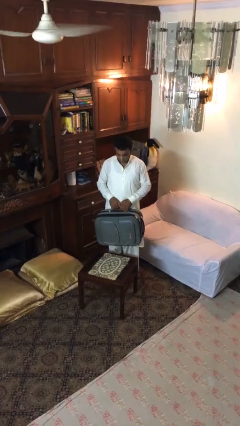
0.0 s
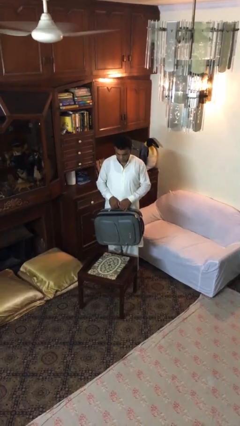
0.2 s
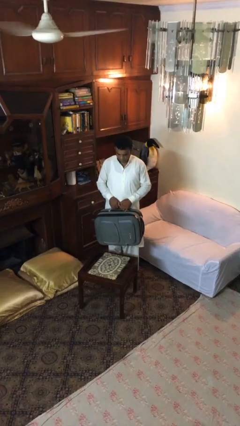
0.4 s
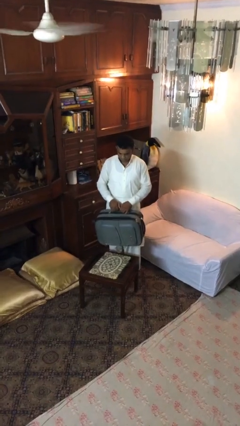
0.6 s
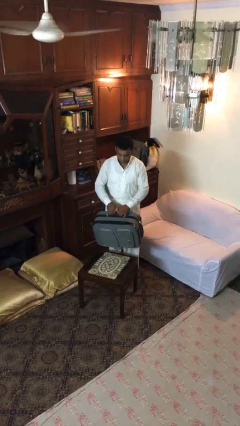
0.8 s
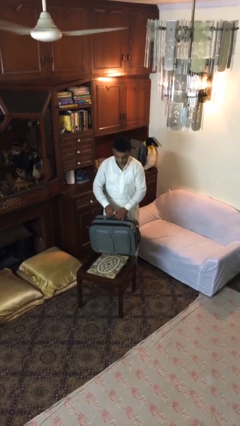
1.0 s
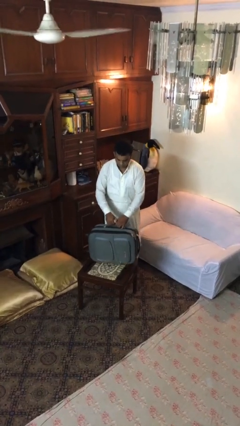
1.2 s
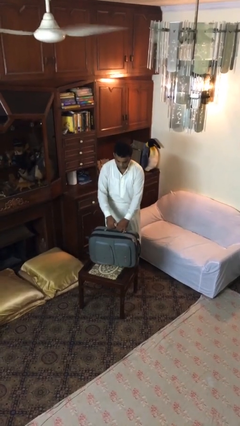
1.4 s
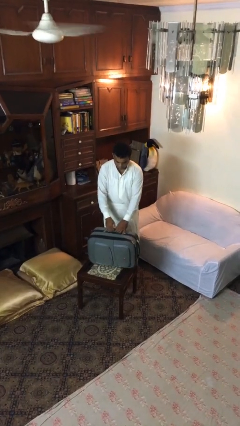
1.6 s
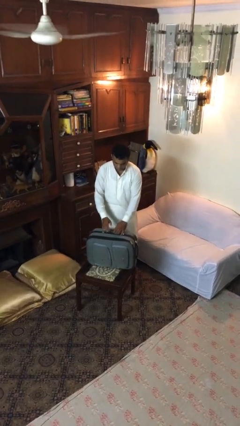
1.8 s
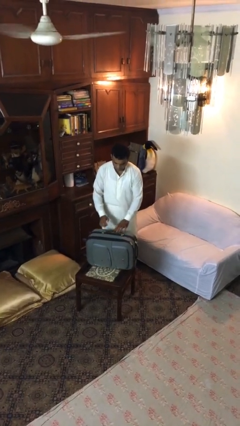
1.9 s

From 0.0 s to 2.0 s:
person puts down object on table

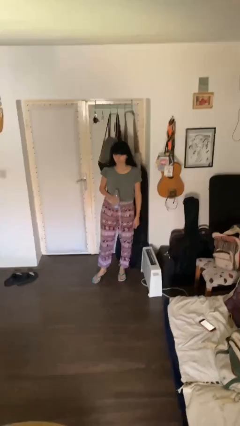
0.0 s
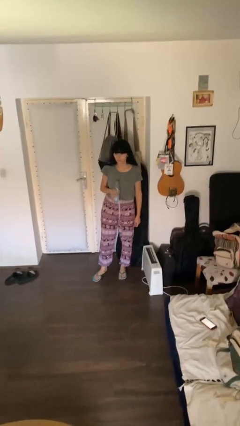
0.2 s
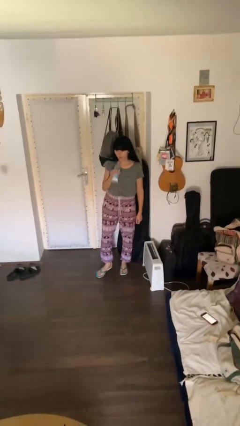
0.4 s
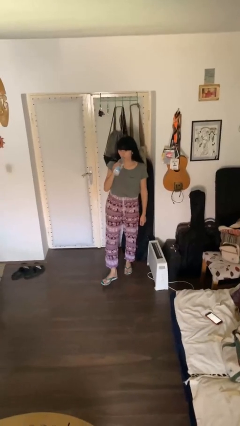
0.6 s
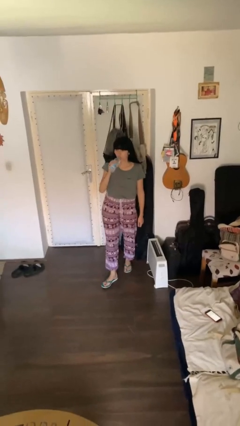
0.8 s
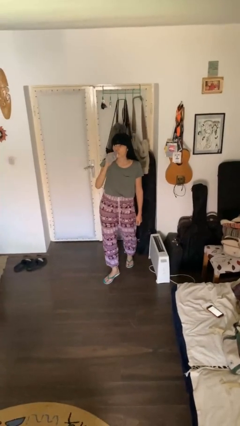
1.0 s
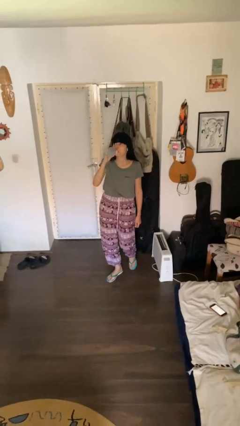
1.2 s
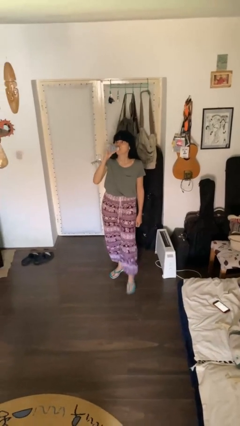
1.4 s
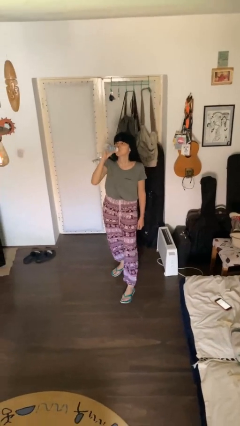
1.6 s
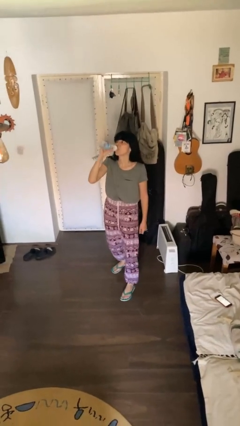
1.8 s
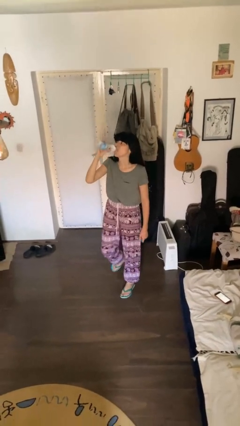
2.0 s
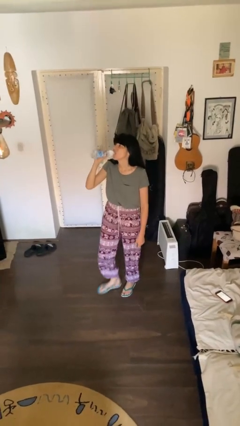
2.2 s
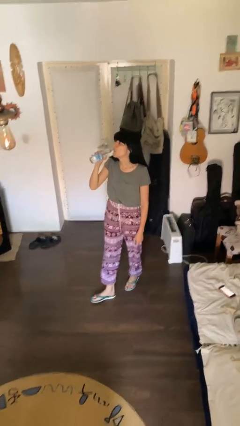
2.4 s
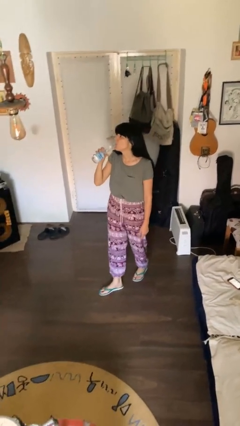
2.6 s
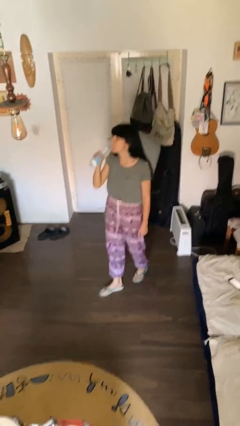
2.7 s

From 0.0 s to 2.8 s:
person drinks from bottle

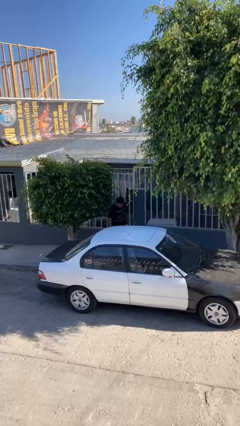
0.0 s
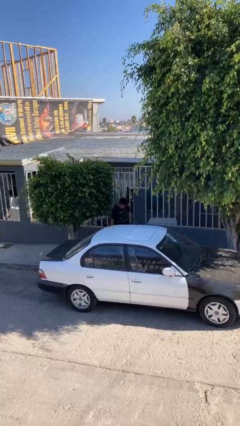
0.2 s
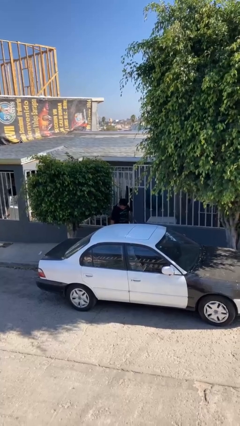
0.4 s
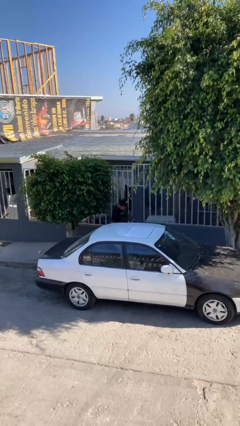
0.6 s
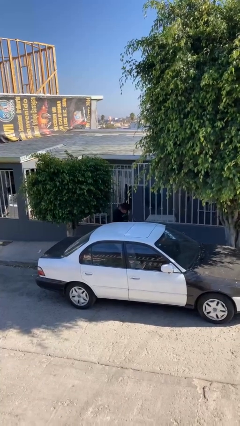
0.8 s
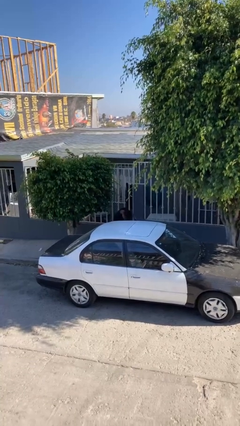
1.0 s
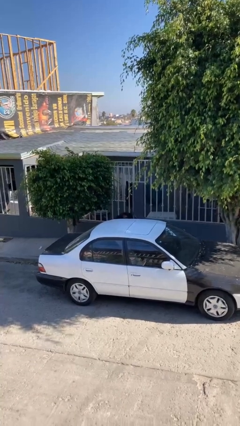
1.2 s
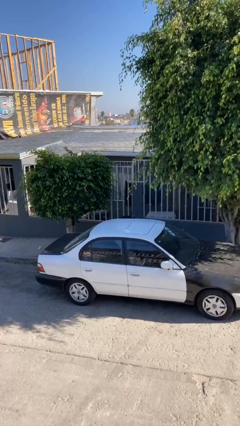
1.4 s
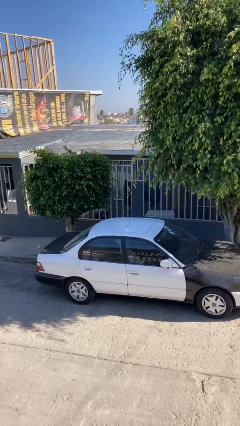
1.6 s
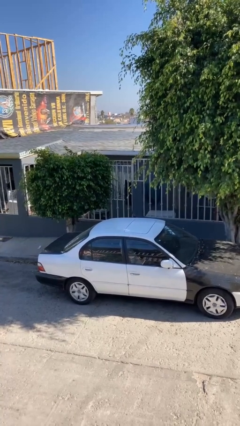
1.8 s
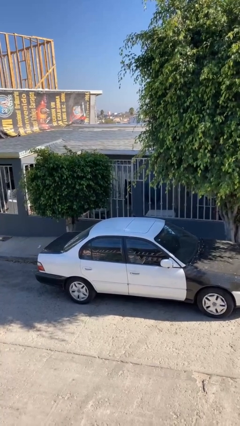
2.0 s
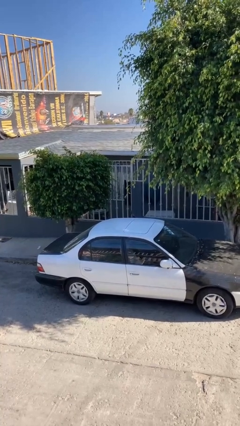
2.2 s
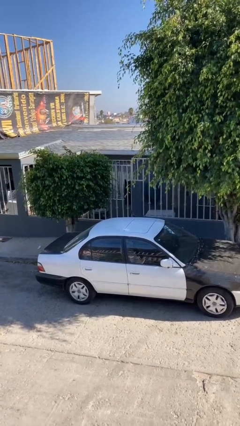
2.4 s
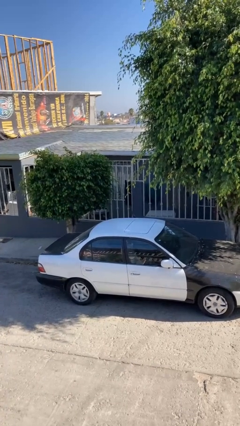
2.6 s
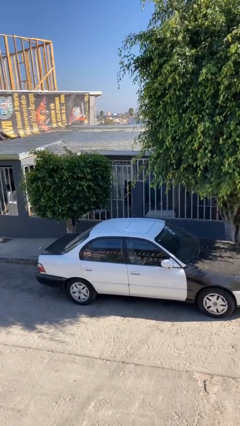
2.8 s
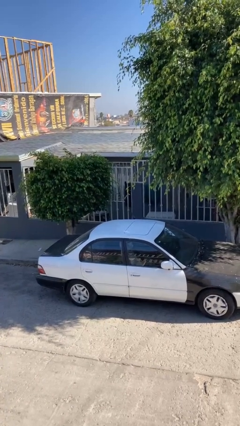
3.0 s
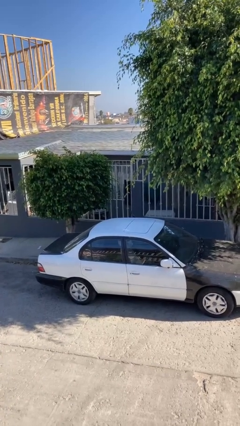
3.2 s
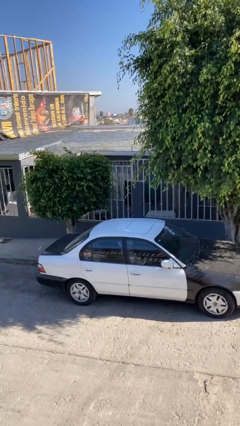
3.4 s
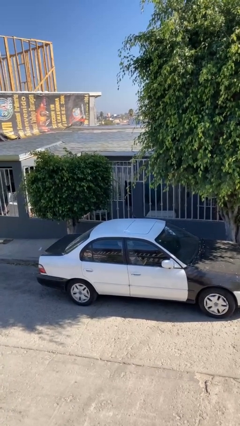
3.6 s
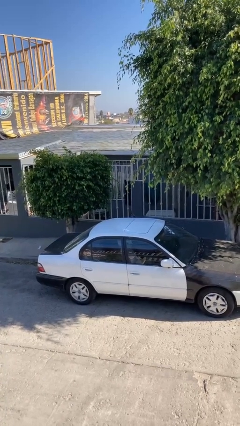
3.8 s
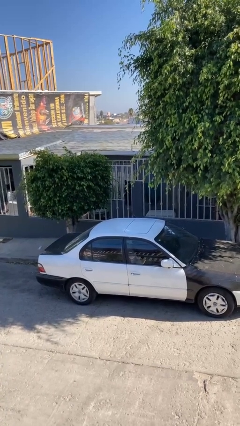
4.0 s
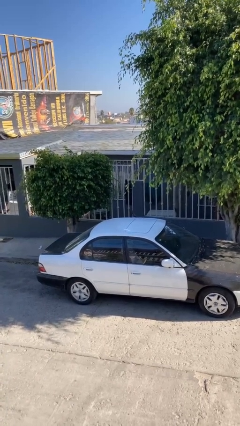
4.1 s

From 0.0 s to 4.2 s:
person enters car

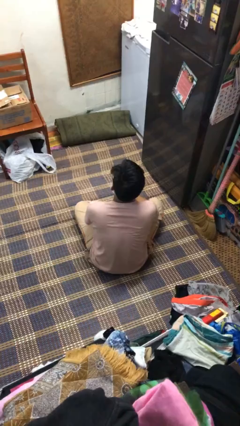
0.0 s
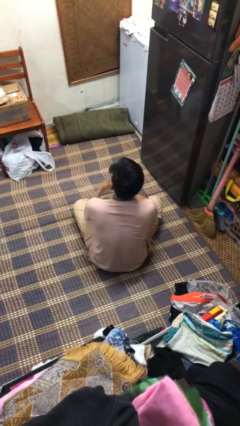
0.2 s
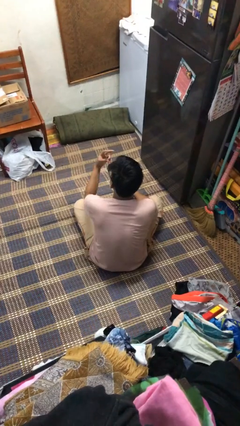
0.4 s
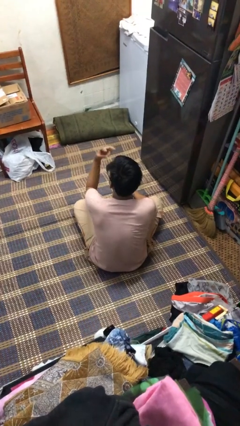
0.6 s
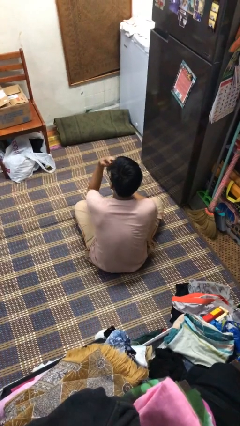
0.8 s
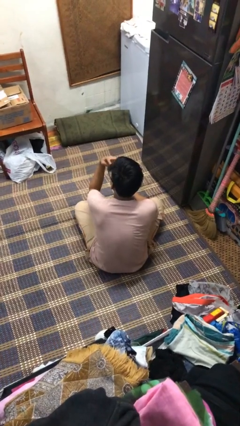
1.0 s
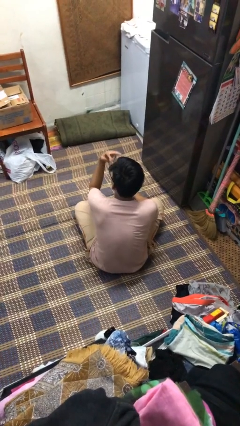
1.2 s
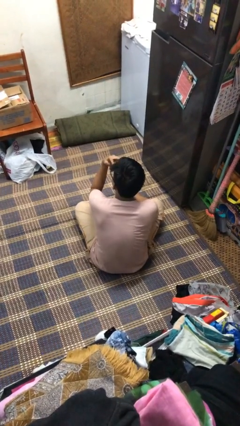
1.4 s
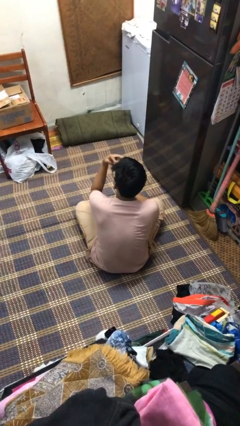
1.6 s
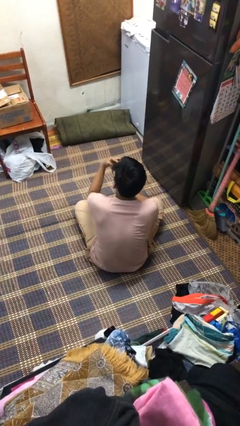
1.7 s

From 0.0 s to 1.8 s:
person gestures watch closely

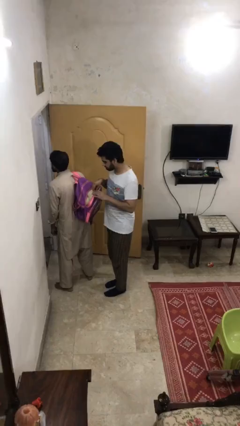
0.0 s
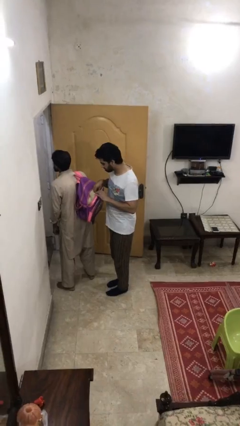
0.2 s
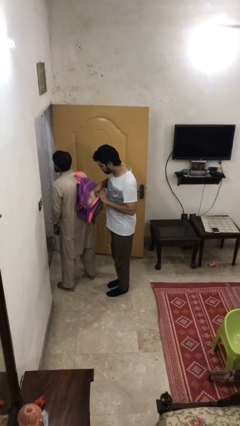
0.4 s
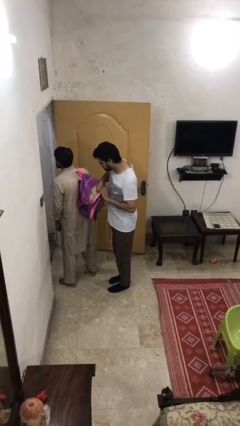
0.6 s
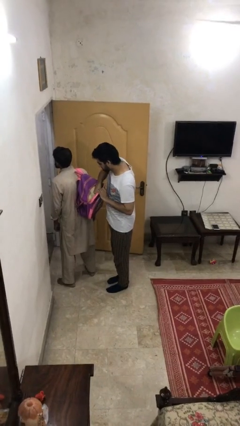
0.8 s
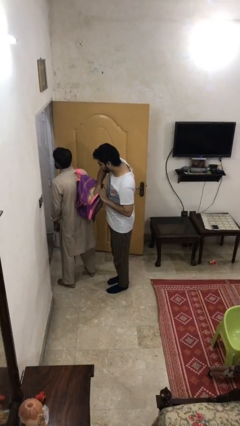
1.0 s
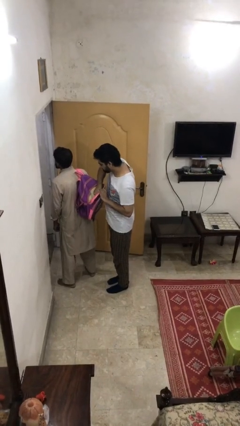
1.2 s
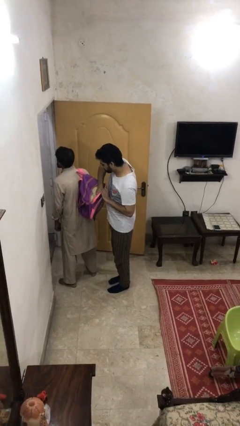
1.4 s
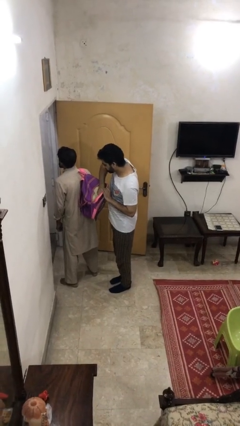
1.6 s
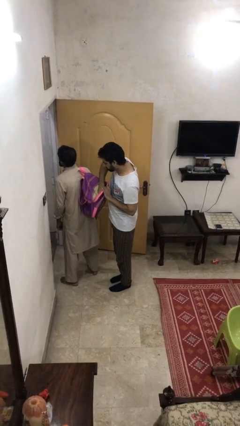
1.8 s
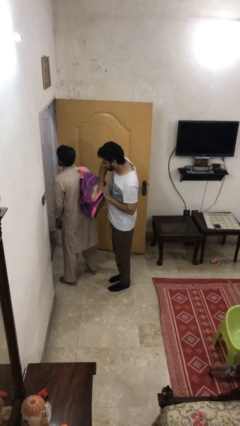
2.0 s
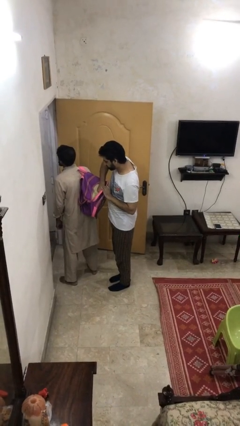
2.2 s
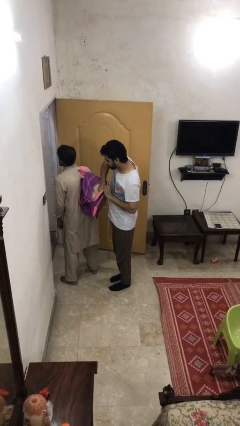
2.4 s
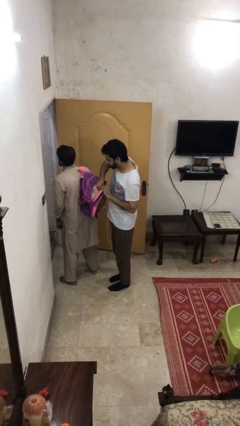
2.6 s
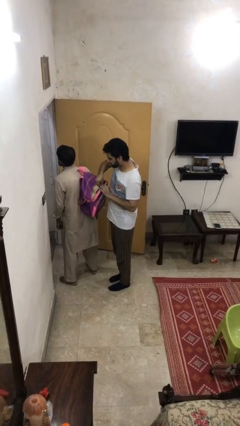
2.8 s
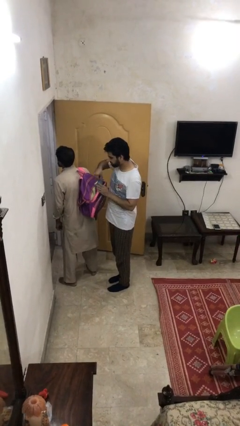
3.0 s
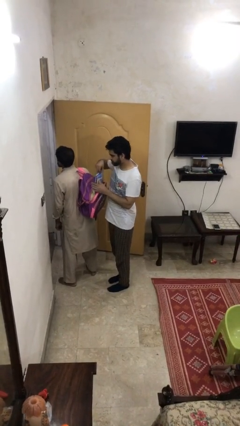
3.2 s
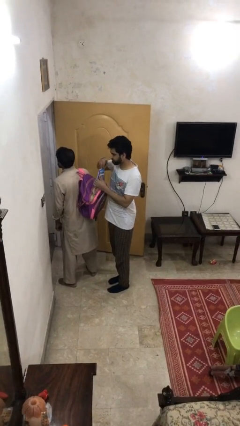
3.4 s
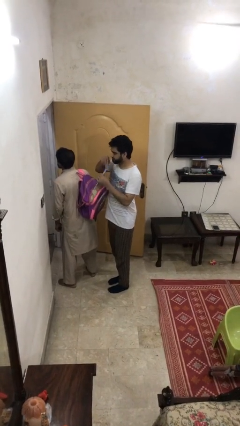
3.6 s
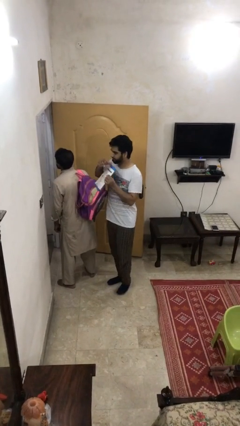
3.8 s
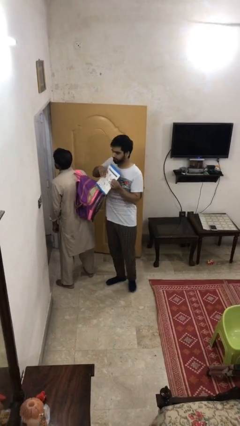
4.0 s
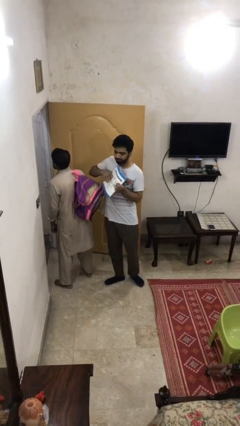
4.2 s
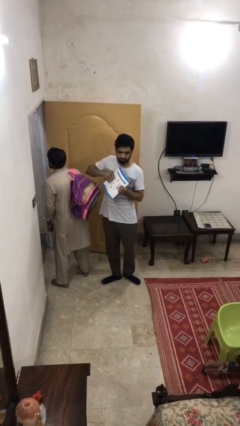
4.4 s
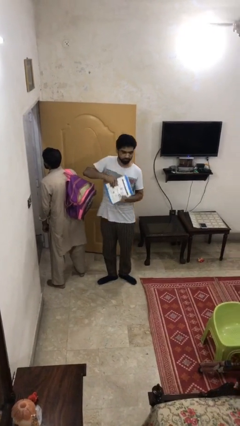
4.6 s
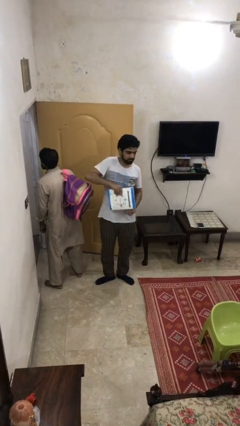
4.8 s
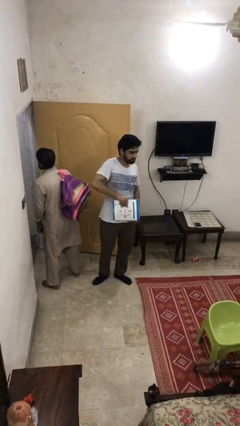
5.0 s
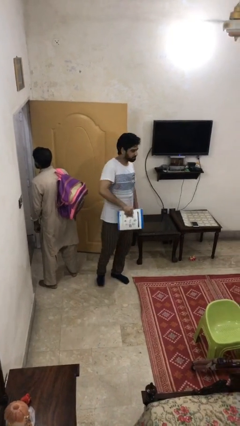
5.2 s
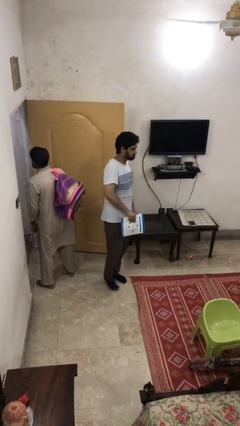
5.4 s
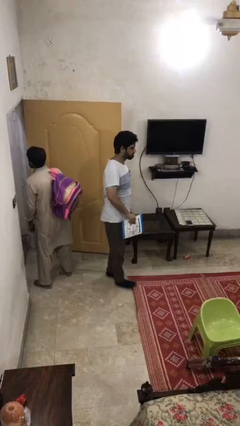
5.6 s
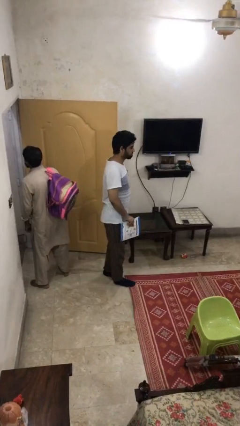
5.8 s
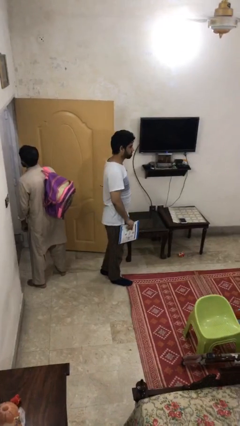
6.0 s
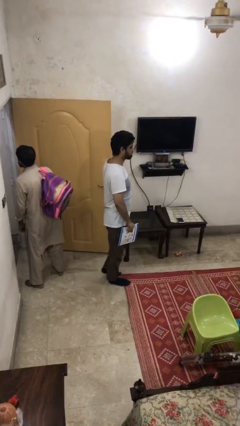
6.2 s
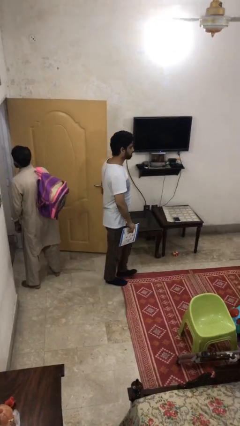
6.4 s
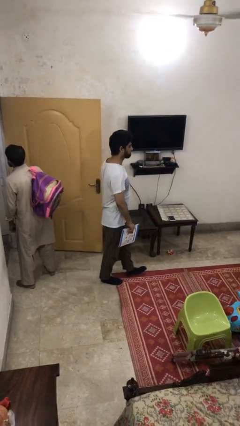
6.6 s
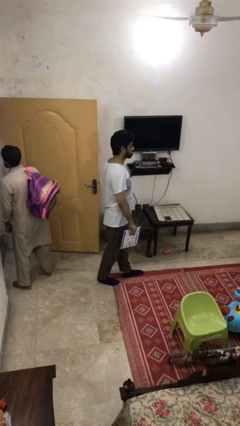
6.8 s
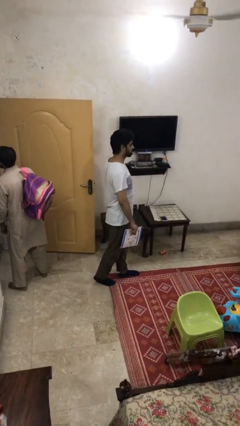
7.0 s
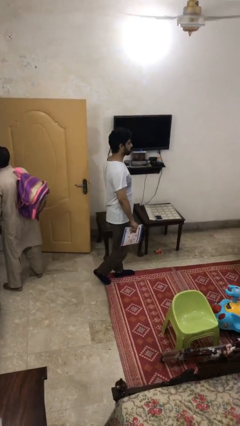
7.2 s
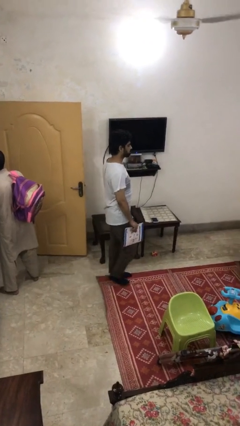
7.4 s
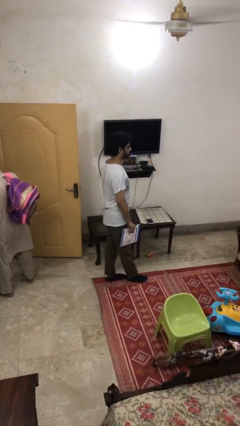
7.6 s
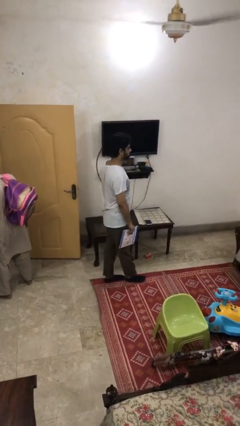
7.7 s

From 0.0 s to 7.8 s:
person steals object from person
